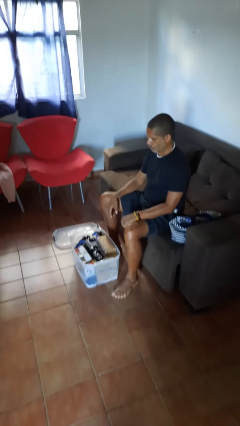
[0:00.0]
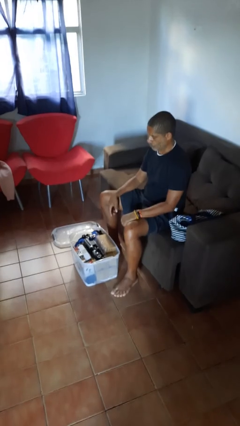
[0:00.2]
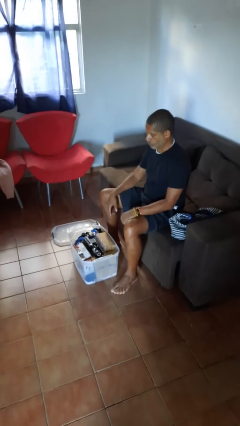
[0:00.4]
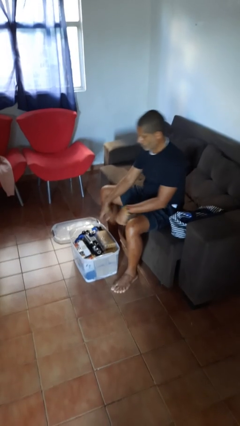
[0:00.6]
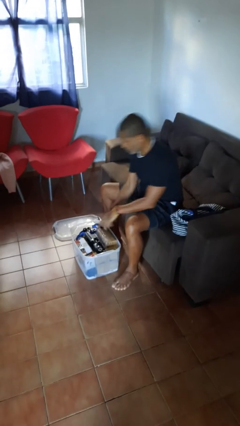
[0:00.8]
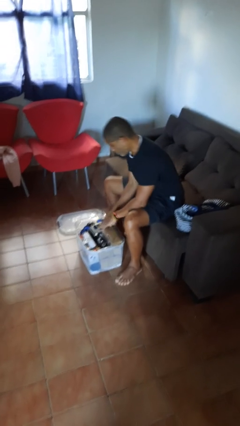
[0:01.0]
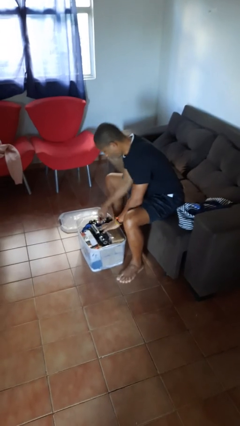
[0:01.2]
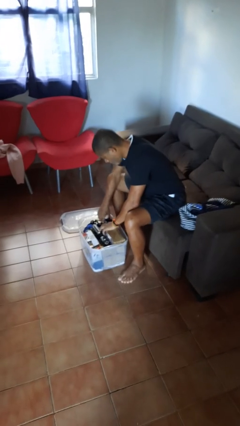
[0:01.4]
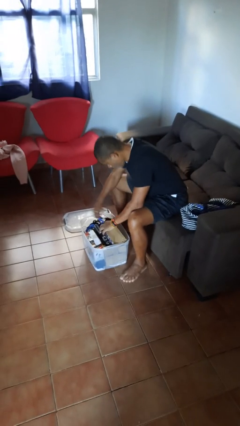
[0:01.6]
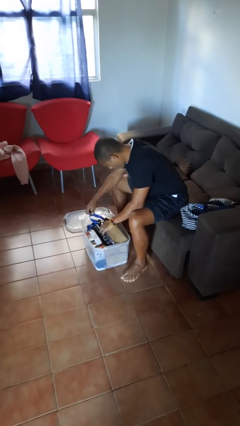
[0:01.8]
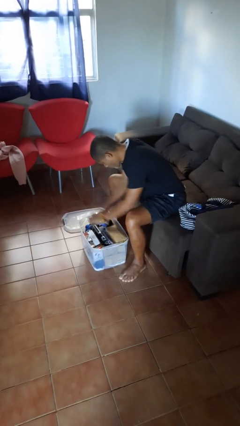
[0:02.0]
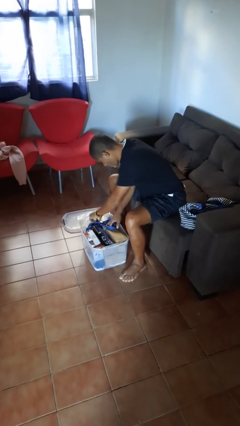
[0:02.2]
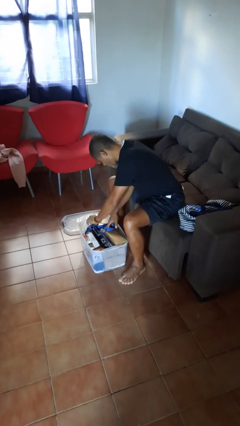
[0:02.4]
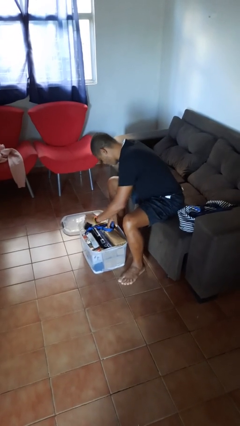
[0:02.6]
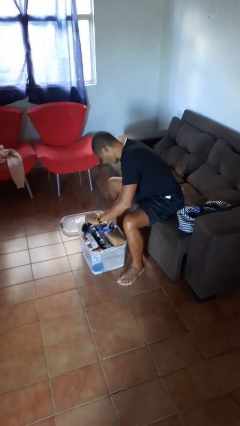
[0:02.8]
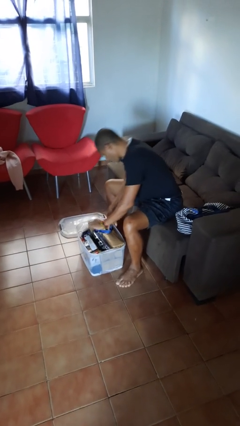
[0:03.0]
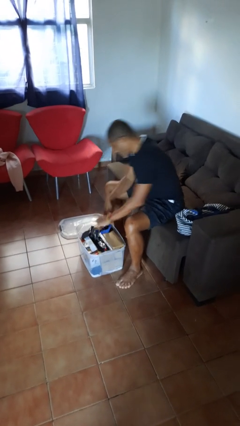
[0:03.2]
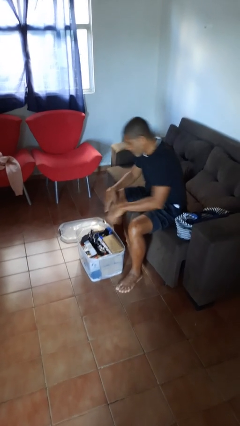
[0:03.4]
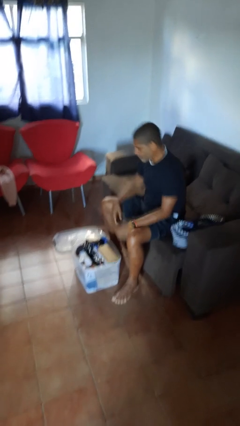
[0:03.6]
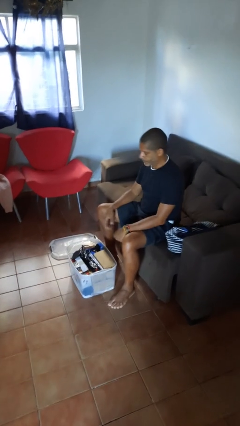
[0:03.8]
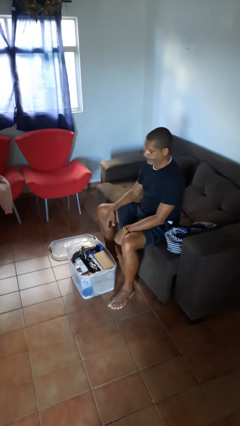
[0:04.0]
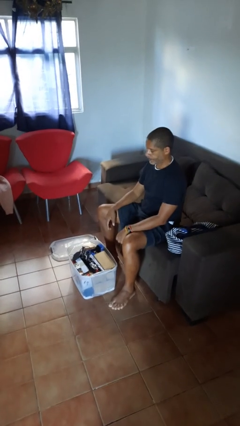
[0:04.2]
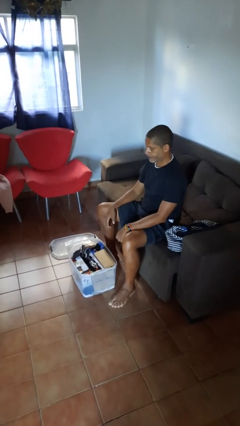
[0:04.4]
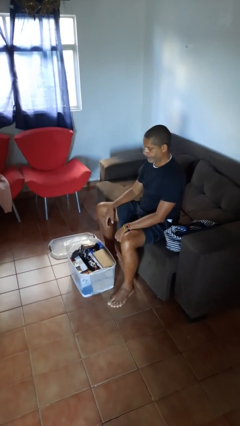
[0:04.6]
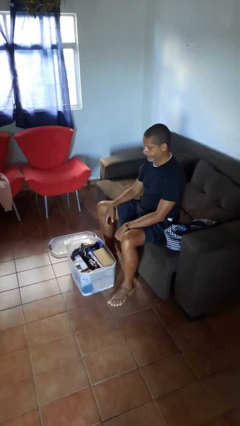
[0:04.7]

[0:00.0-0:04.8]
person searches in box

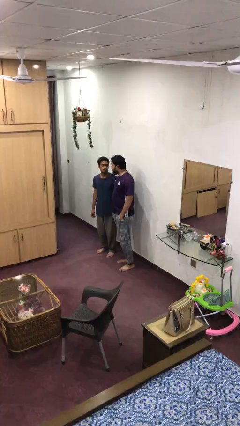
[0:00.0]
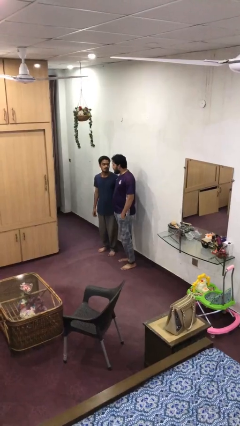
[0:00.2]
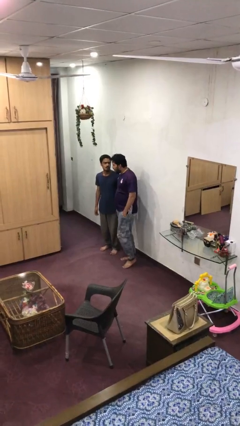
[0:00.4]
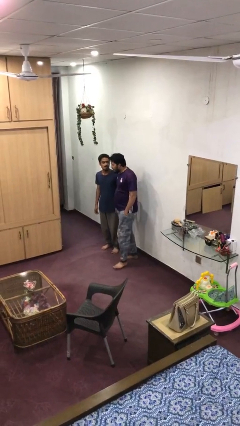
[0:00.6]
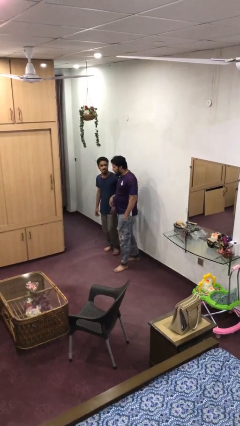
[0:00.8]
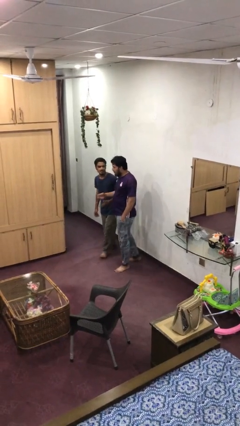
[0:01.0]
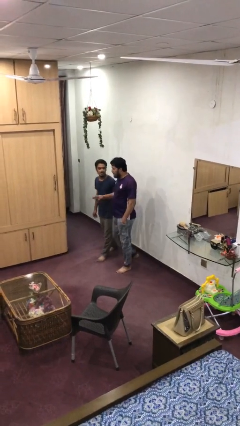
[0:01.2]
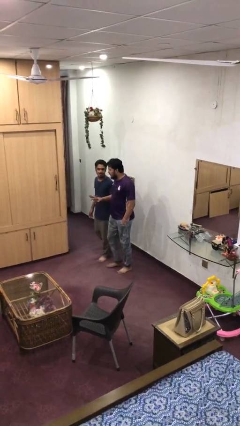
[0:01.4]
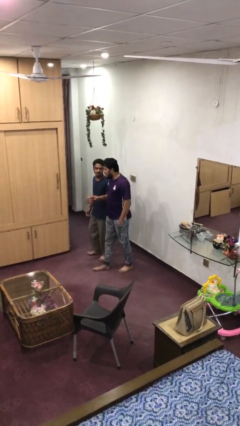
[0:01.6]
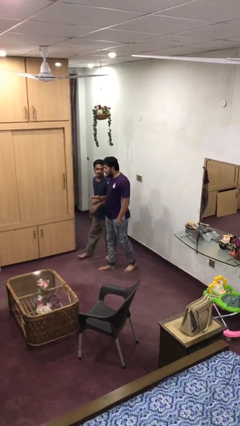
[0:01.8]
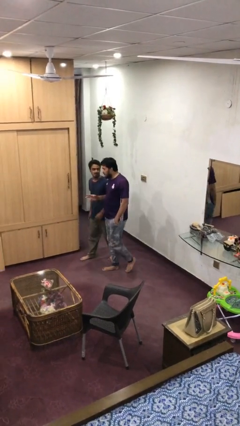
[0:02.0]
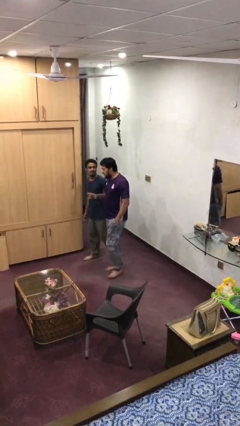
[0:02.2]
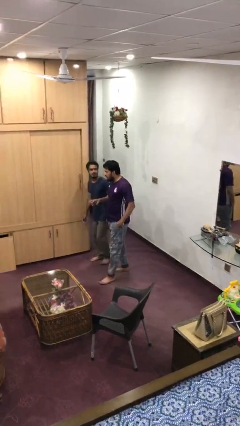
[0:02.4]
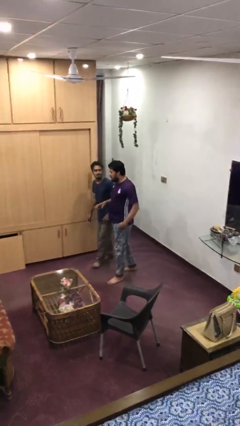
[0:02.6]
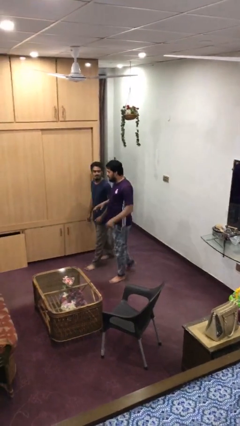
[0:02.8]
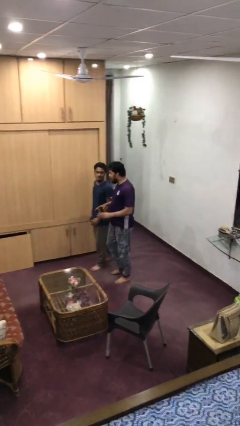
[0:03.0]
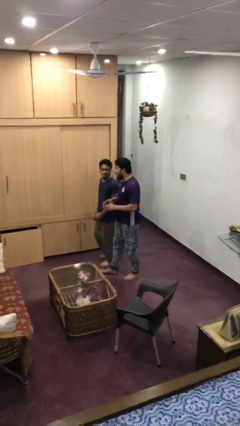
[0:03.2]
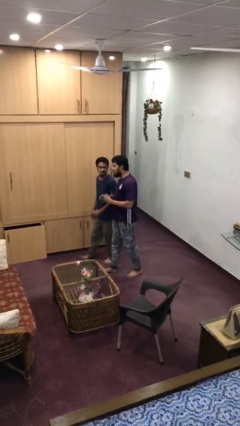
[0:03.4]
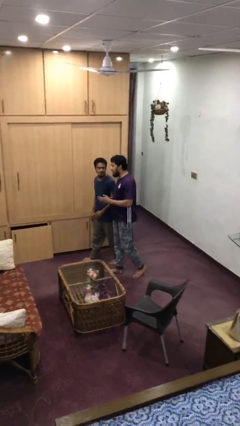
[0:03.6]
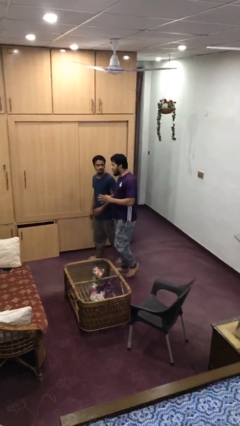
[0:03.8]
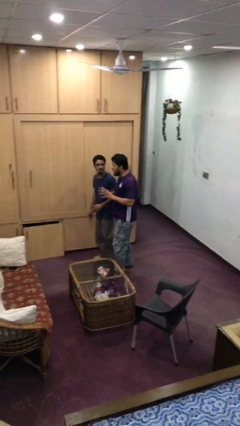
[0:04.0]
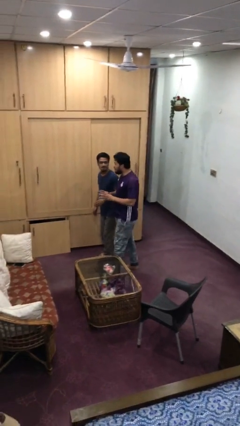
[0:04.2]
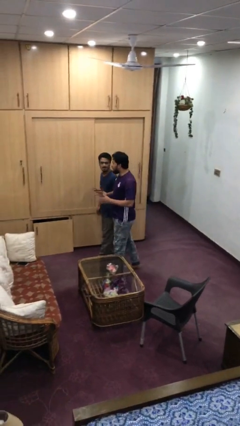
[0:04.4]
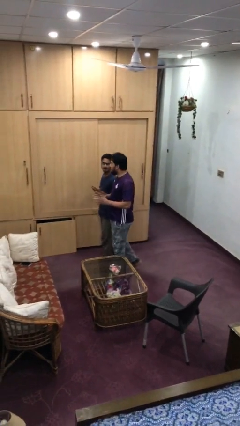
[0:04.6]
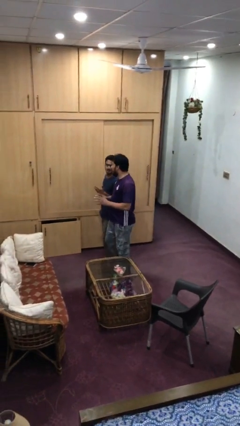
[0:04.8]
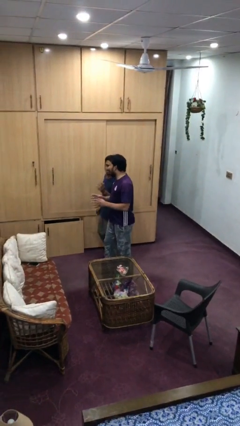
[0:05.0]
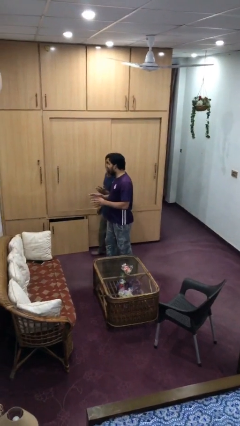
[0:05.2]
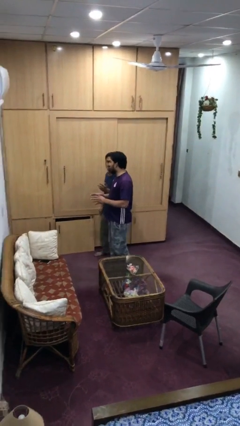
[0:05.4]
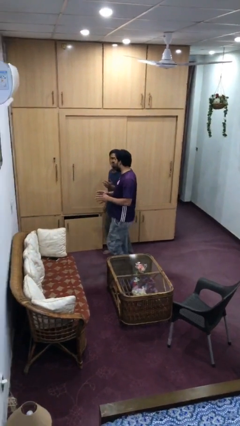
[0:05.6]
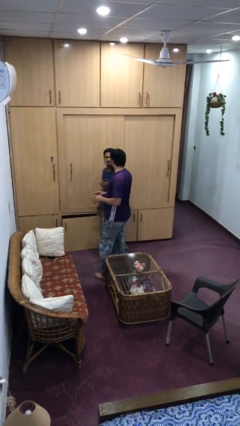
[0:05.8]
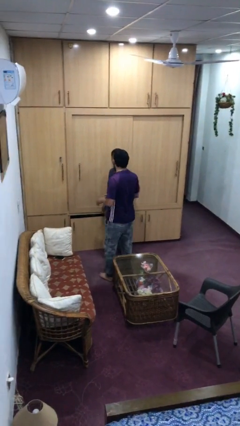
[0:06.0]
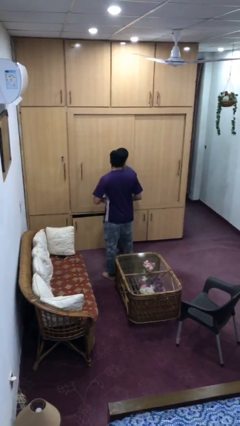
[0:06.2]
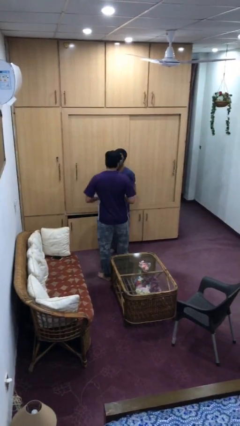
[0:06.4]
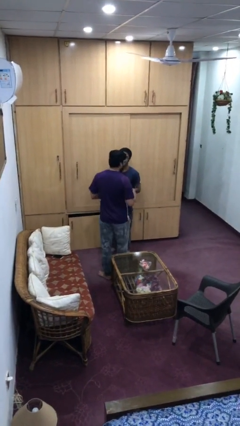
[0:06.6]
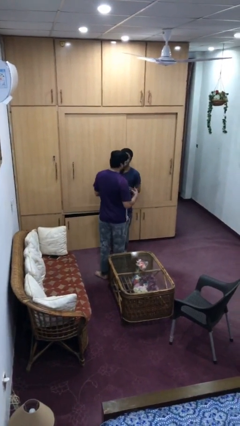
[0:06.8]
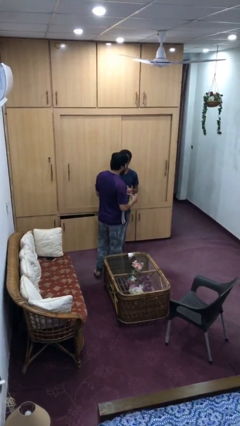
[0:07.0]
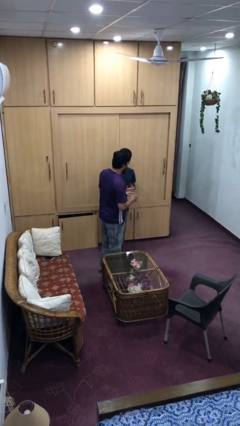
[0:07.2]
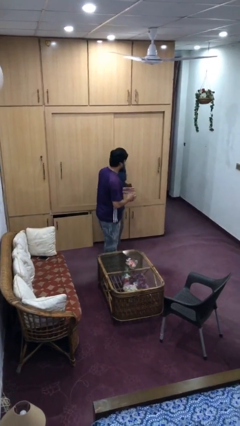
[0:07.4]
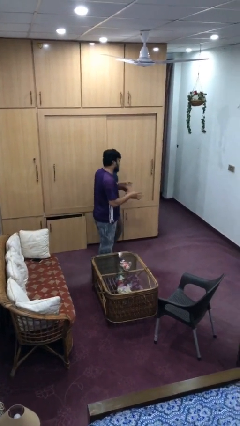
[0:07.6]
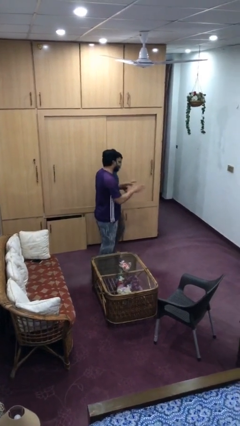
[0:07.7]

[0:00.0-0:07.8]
person talks to person

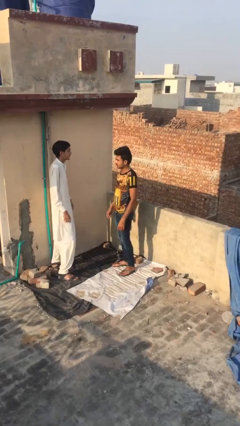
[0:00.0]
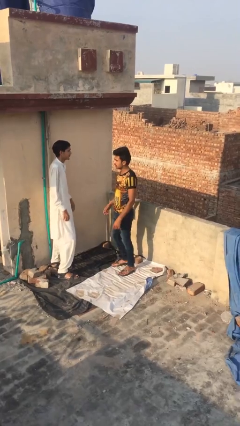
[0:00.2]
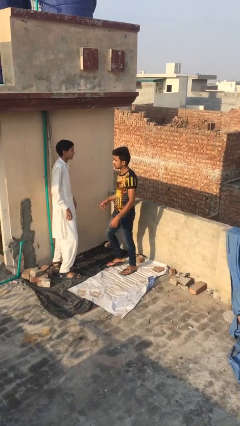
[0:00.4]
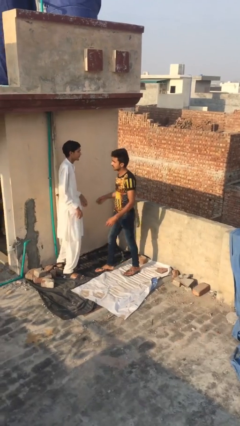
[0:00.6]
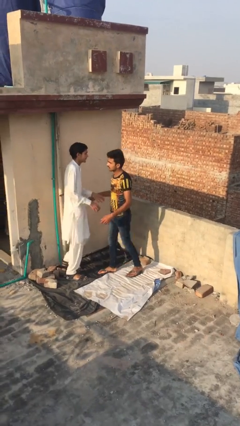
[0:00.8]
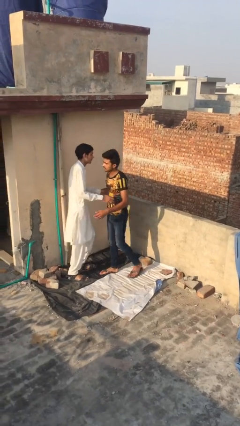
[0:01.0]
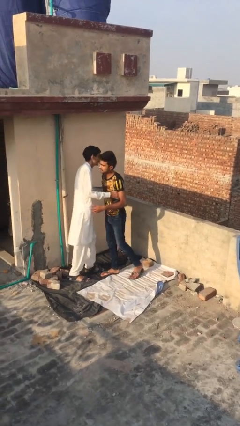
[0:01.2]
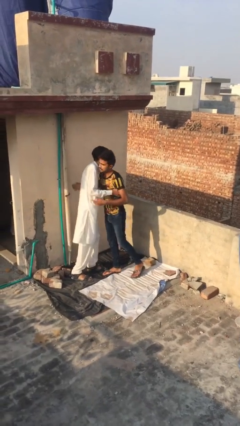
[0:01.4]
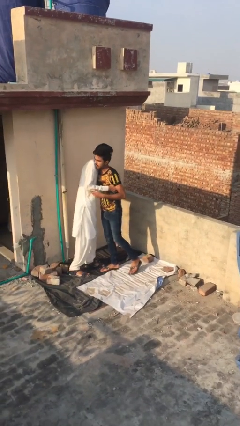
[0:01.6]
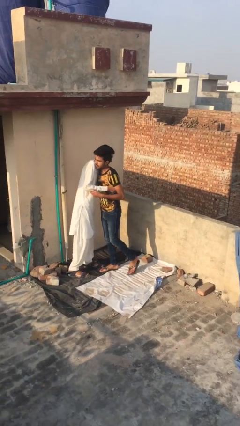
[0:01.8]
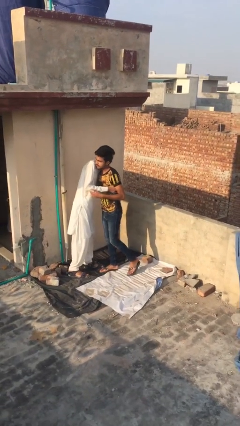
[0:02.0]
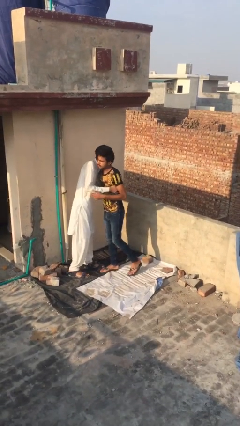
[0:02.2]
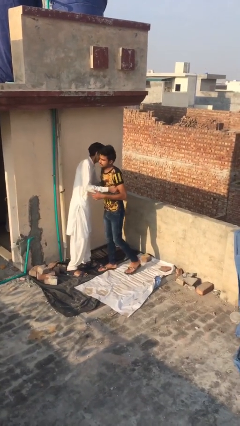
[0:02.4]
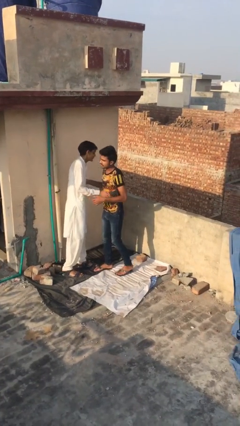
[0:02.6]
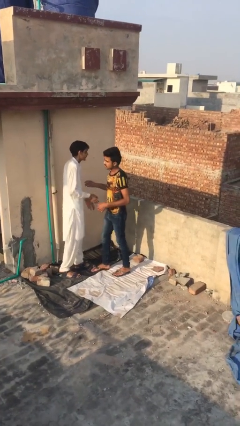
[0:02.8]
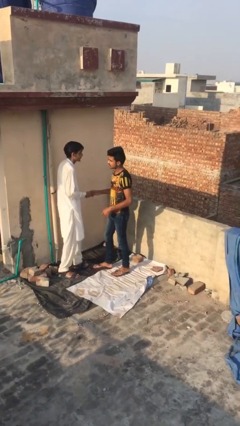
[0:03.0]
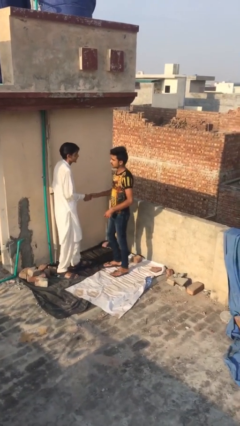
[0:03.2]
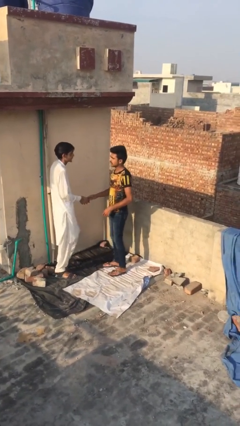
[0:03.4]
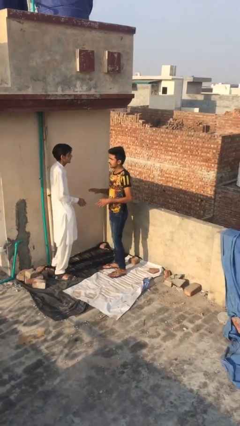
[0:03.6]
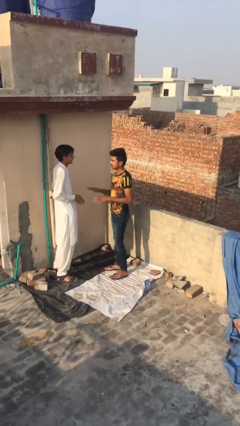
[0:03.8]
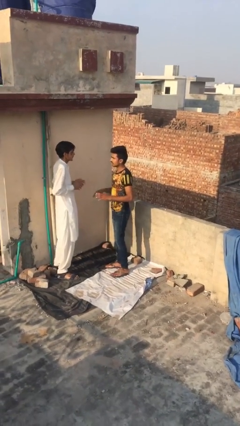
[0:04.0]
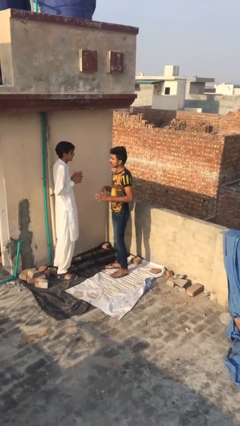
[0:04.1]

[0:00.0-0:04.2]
person embraces person

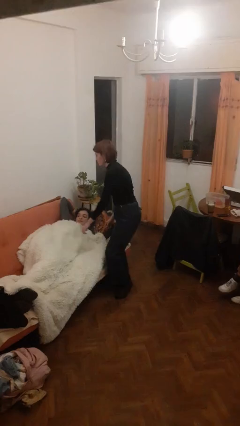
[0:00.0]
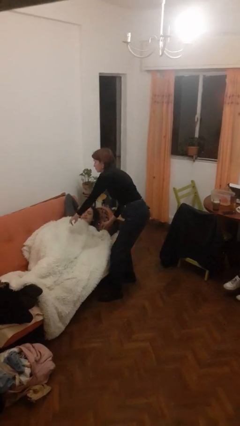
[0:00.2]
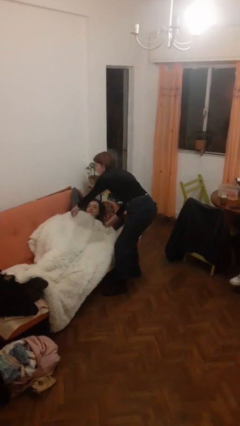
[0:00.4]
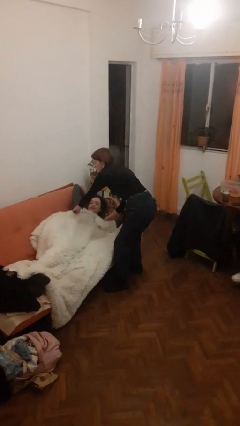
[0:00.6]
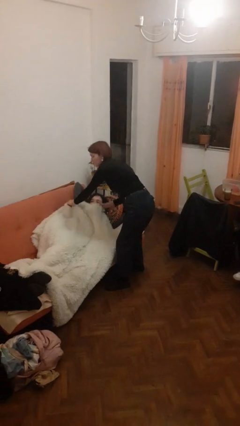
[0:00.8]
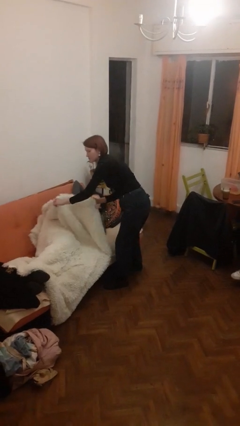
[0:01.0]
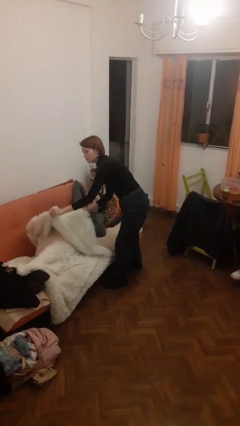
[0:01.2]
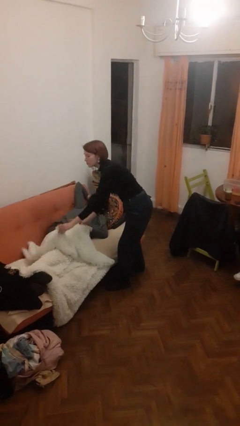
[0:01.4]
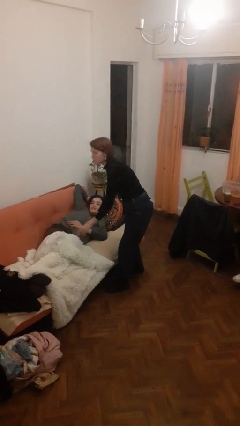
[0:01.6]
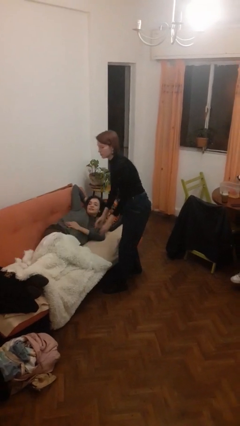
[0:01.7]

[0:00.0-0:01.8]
person uncovers friend with blanket
